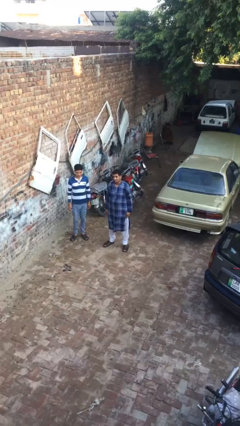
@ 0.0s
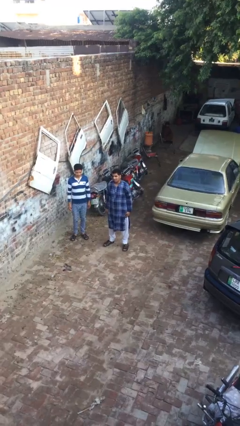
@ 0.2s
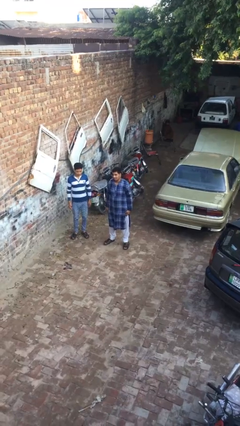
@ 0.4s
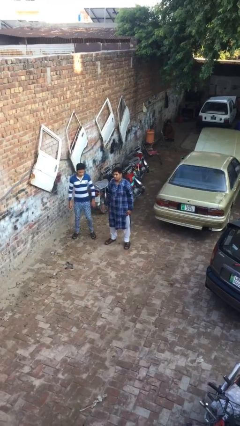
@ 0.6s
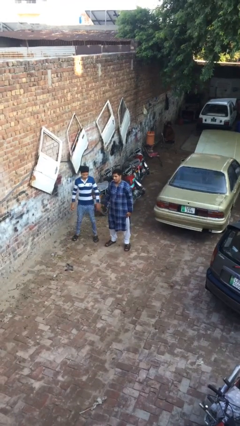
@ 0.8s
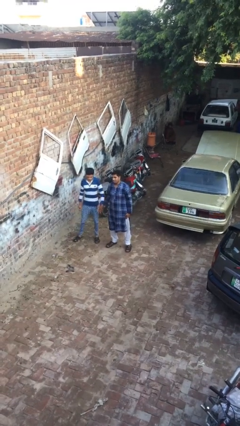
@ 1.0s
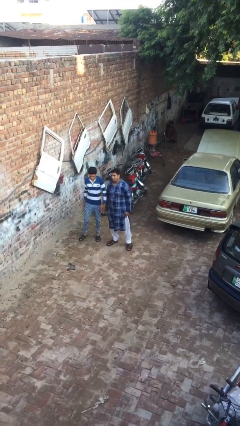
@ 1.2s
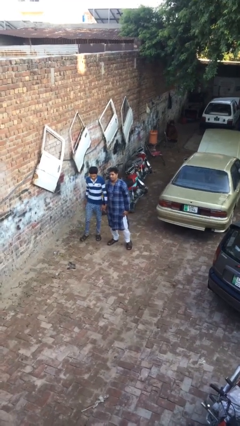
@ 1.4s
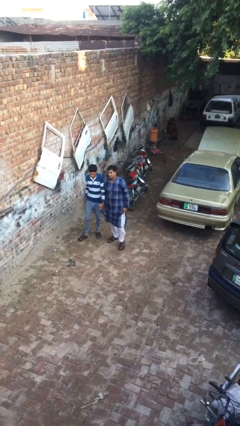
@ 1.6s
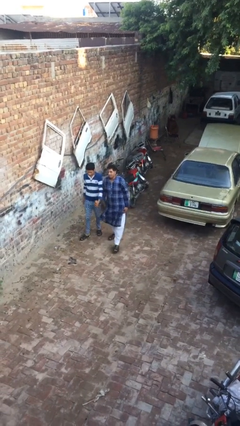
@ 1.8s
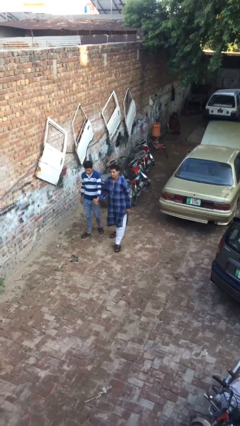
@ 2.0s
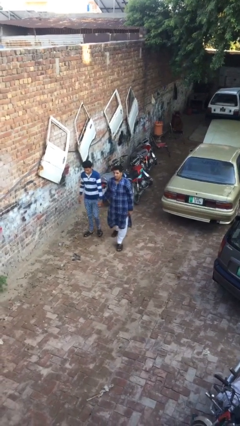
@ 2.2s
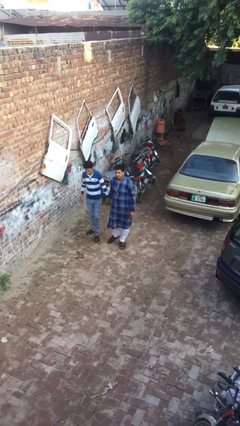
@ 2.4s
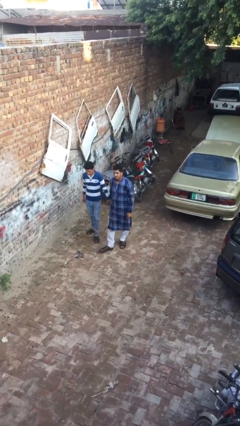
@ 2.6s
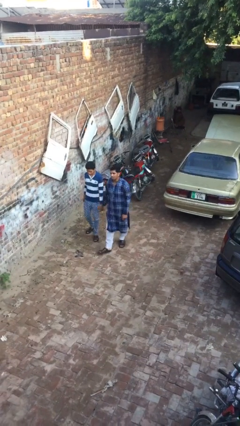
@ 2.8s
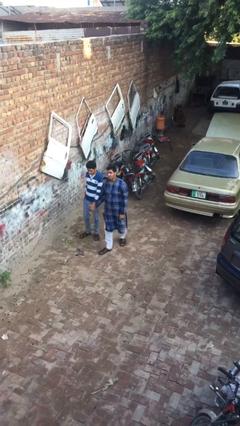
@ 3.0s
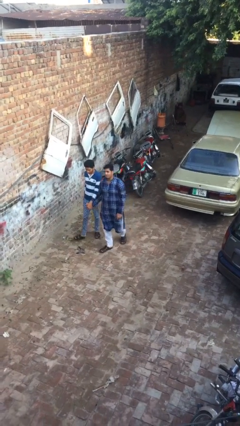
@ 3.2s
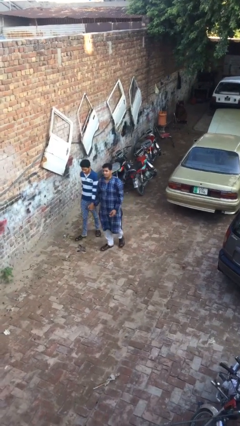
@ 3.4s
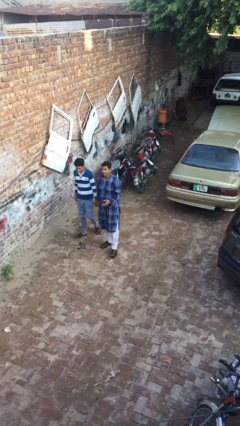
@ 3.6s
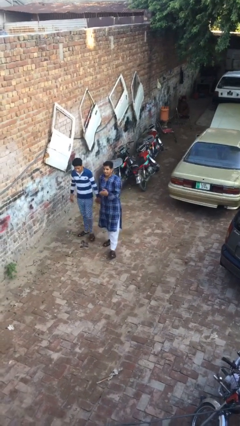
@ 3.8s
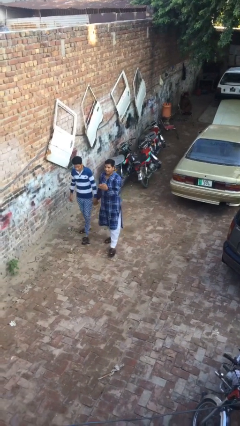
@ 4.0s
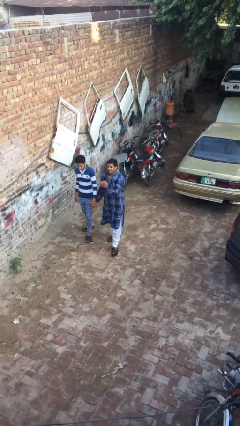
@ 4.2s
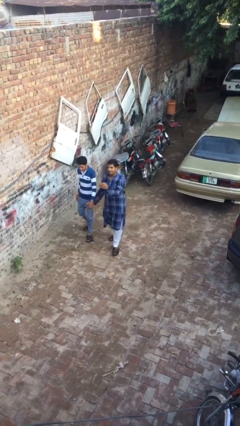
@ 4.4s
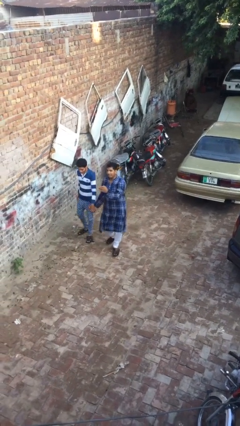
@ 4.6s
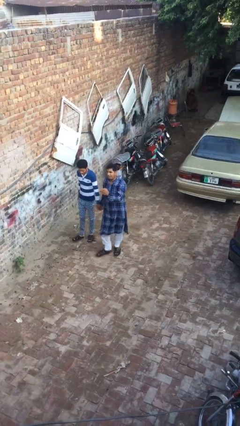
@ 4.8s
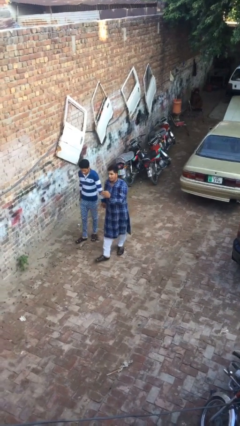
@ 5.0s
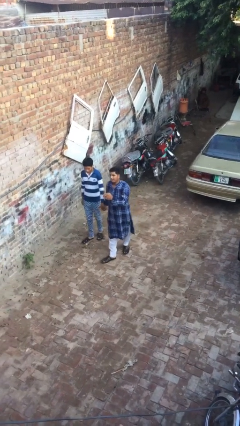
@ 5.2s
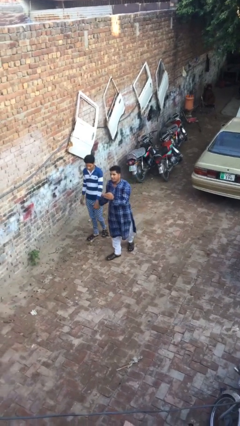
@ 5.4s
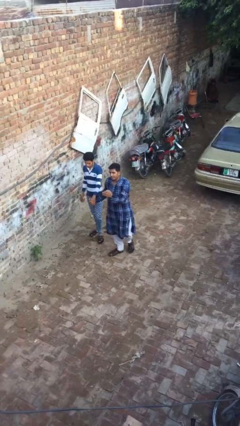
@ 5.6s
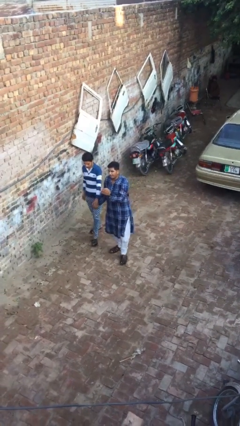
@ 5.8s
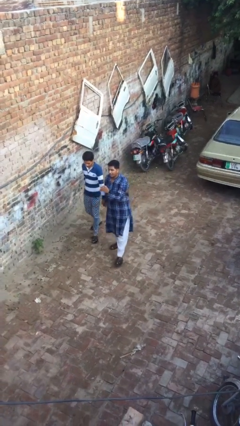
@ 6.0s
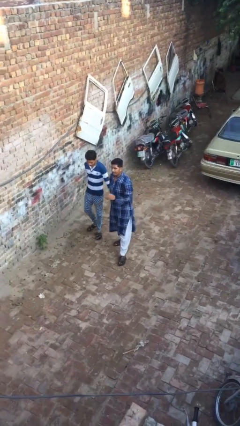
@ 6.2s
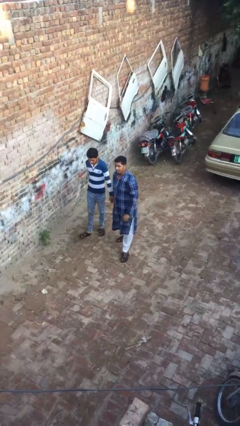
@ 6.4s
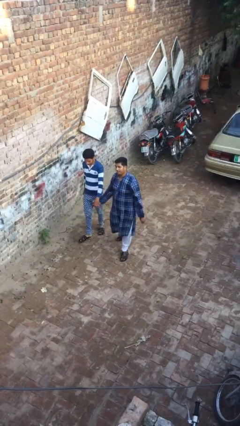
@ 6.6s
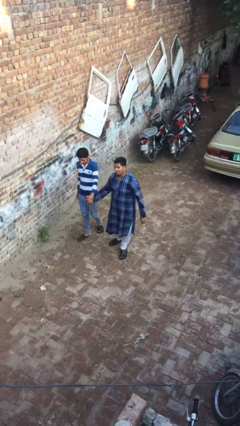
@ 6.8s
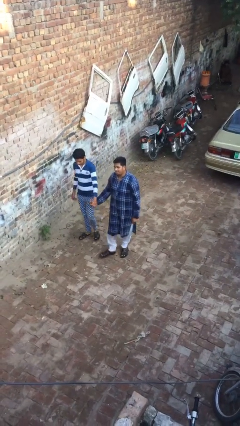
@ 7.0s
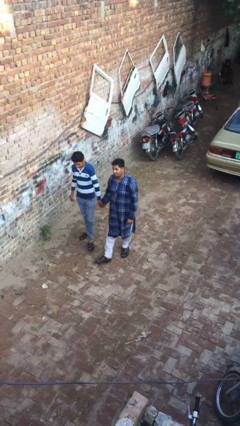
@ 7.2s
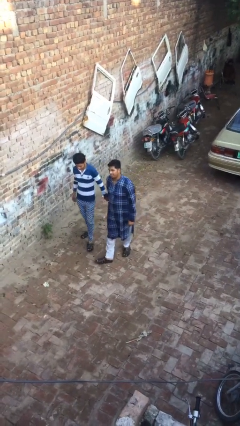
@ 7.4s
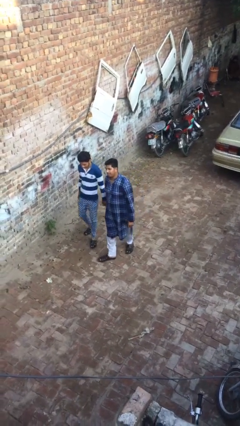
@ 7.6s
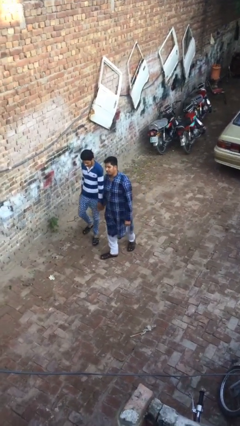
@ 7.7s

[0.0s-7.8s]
person holds hand

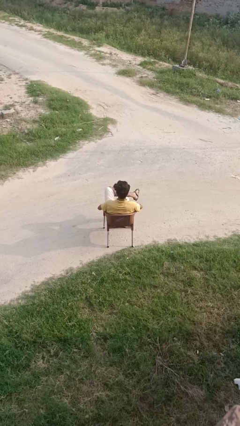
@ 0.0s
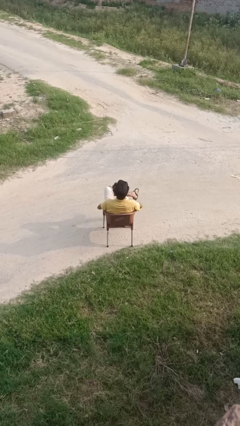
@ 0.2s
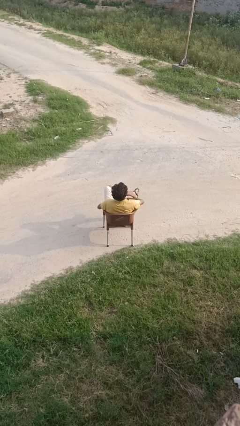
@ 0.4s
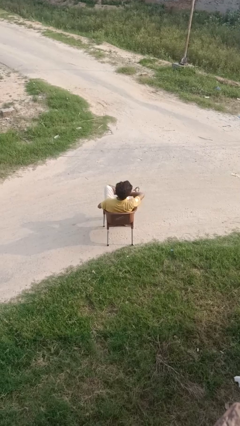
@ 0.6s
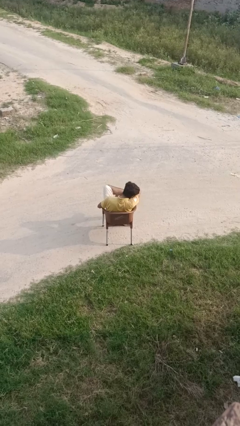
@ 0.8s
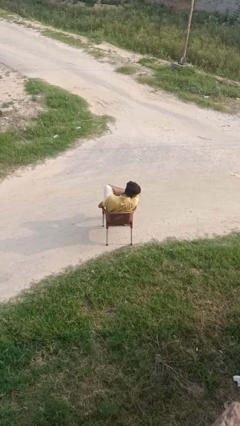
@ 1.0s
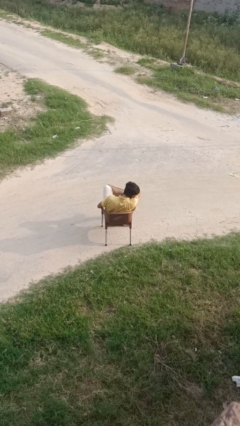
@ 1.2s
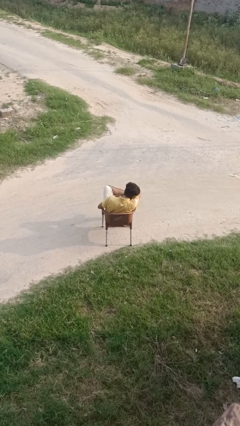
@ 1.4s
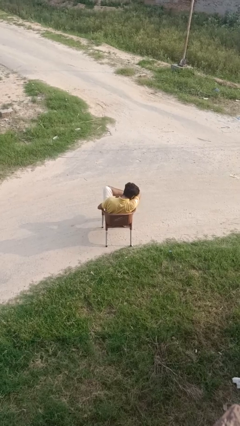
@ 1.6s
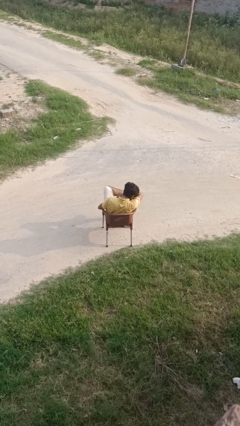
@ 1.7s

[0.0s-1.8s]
person sneezes into arm

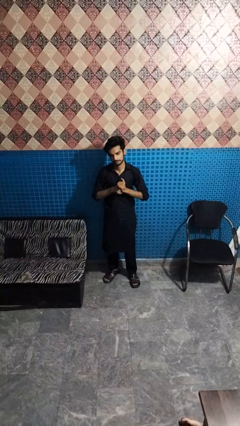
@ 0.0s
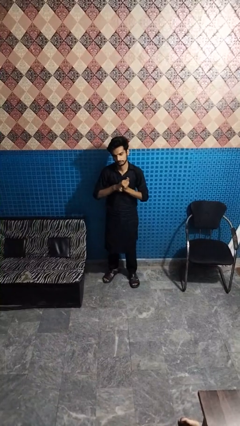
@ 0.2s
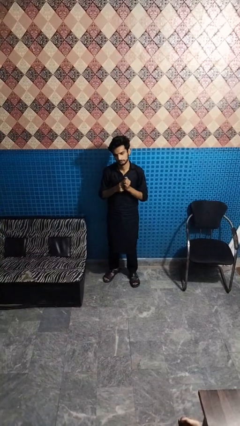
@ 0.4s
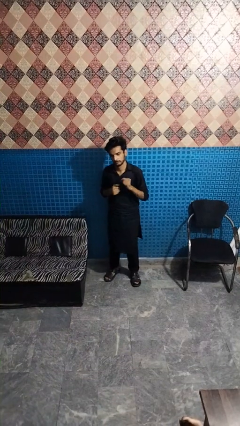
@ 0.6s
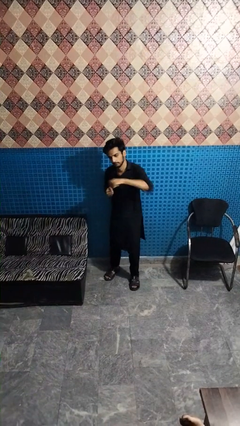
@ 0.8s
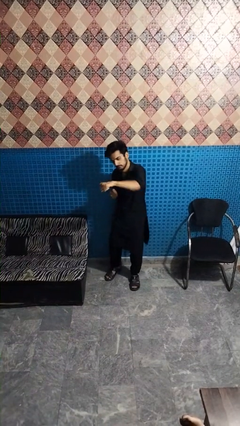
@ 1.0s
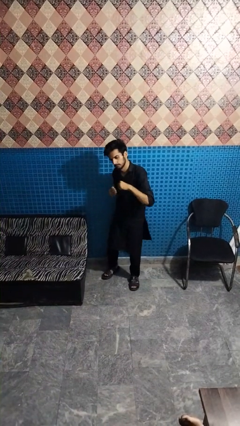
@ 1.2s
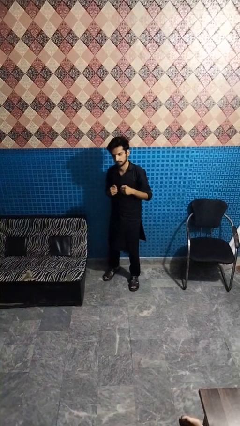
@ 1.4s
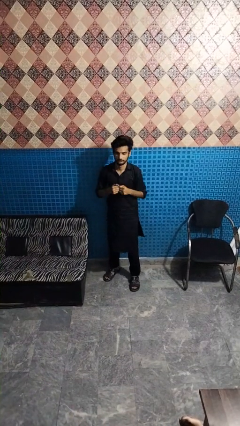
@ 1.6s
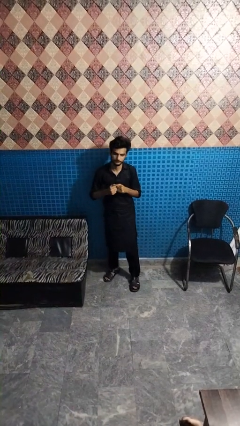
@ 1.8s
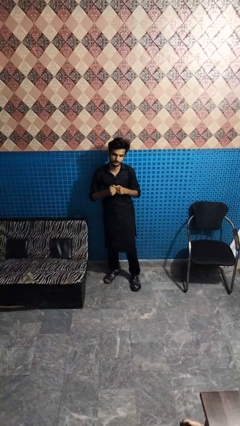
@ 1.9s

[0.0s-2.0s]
person punches

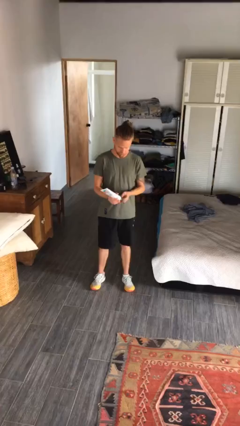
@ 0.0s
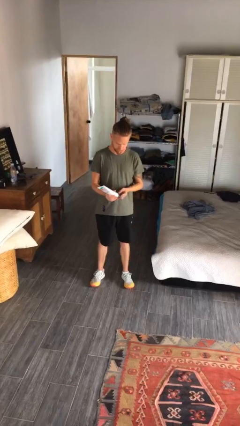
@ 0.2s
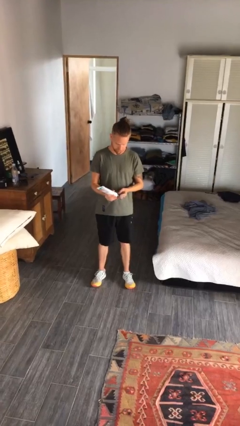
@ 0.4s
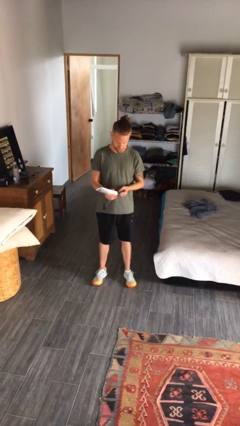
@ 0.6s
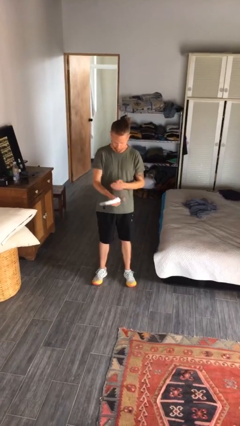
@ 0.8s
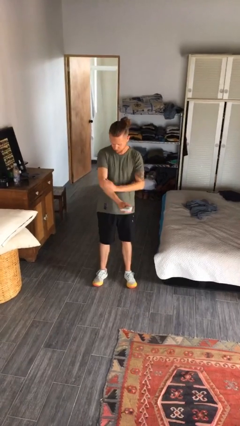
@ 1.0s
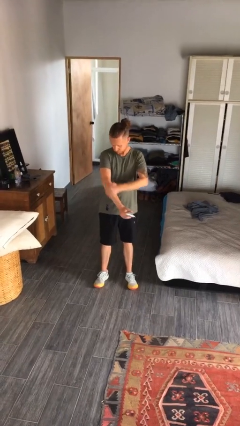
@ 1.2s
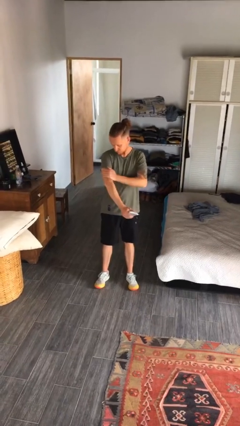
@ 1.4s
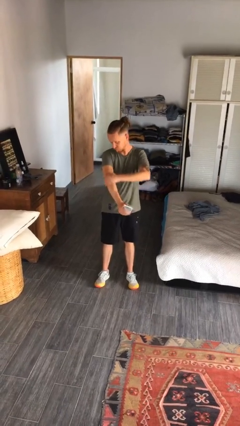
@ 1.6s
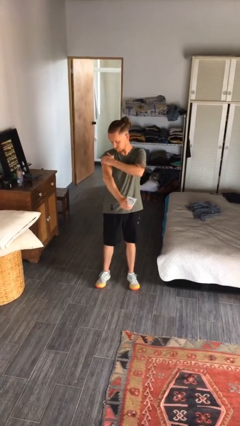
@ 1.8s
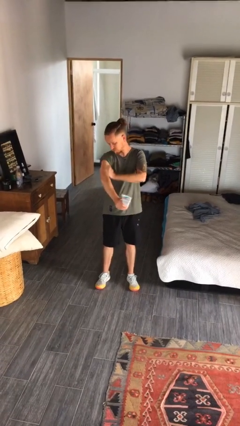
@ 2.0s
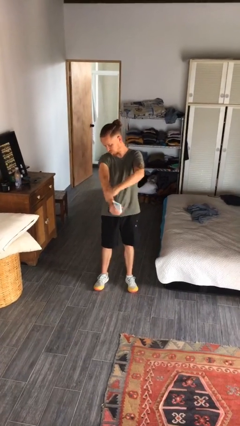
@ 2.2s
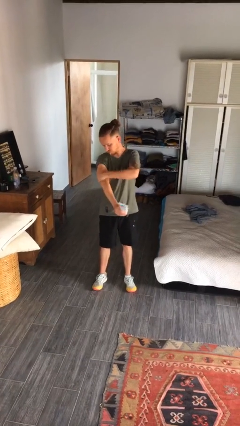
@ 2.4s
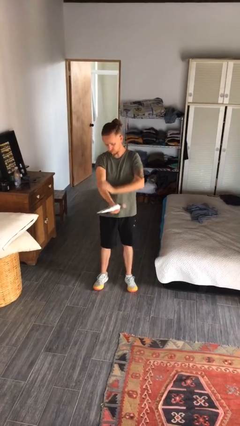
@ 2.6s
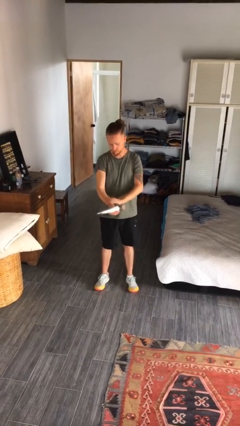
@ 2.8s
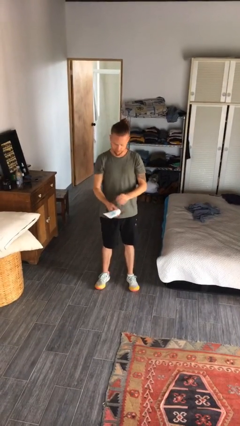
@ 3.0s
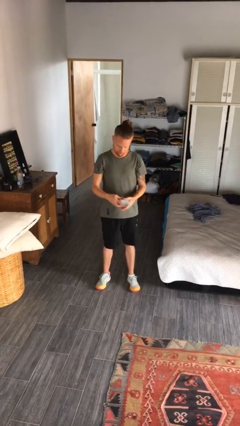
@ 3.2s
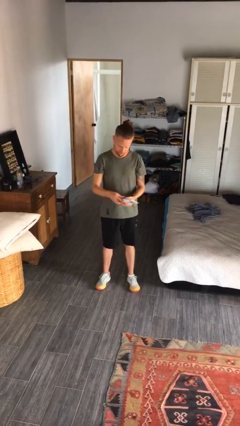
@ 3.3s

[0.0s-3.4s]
person applies sunscreen

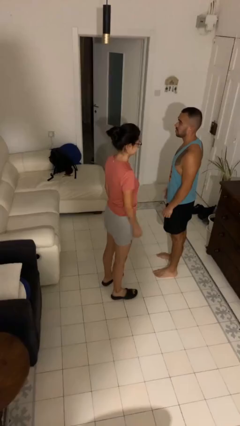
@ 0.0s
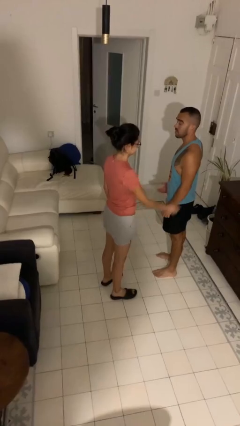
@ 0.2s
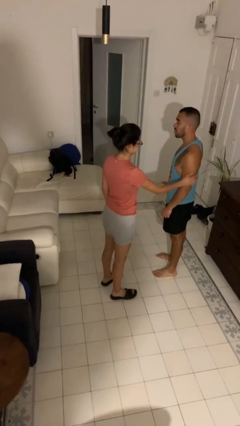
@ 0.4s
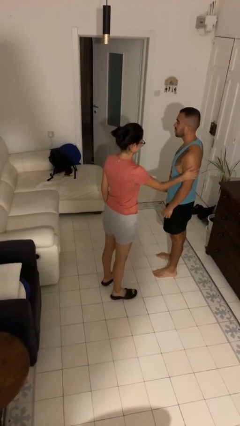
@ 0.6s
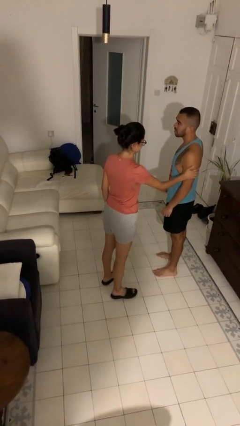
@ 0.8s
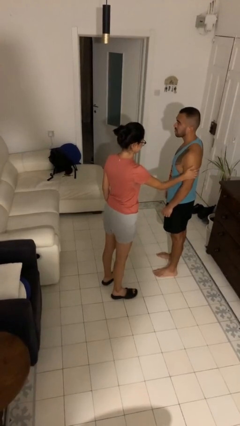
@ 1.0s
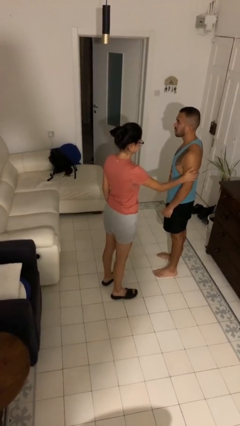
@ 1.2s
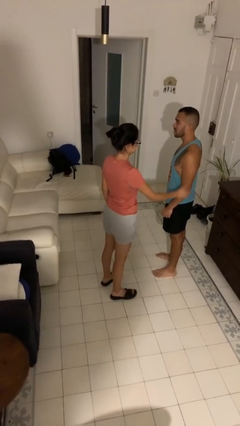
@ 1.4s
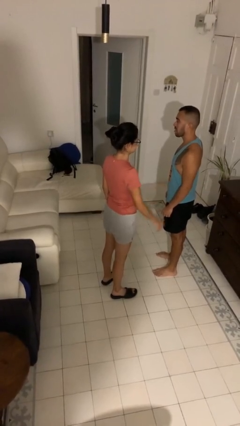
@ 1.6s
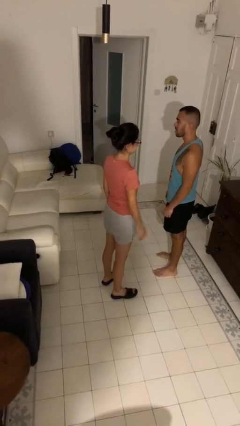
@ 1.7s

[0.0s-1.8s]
person grabs person by bicep

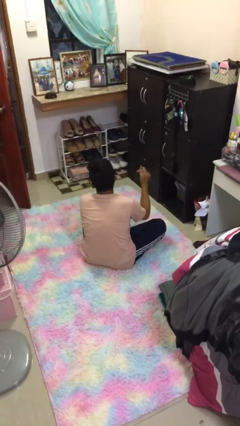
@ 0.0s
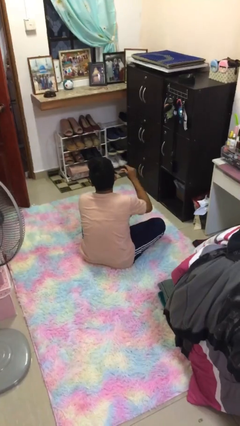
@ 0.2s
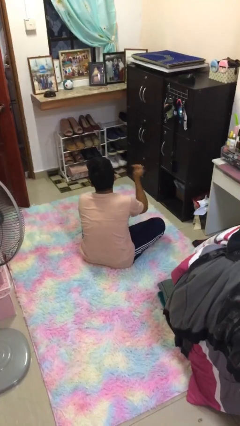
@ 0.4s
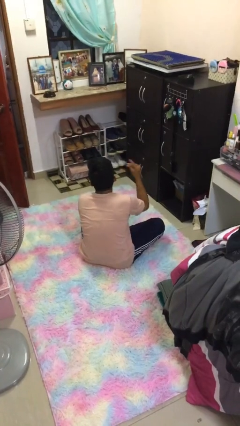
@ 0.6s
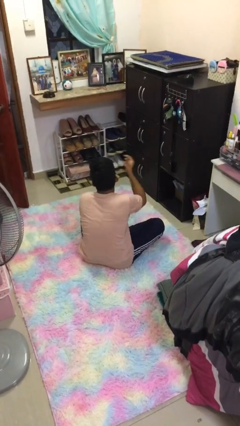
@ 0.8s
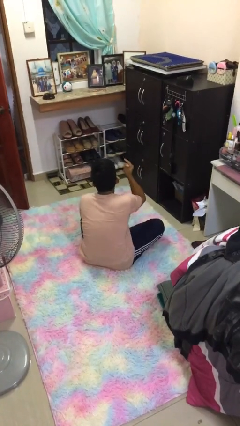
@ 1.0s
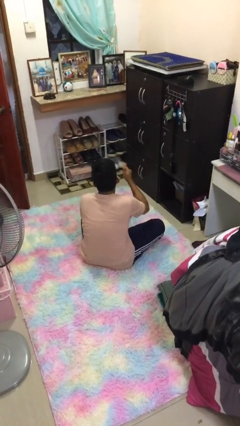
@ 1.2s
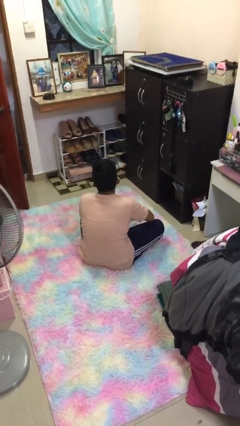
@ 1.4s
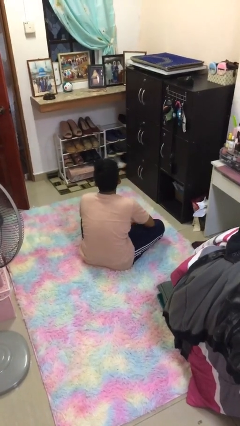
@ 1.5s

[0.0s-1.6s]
person snaps fingers
